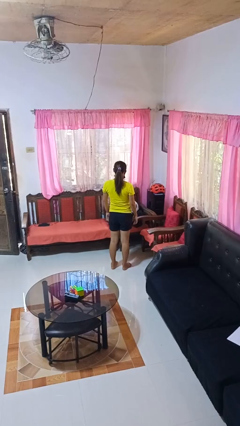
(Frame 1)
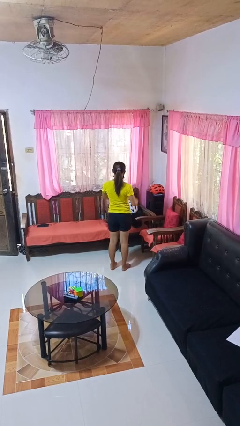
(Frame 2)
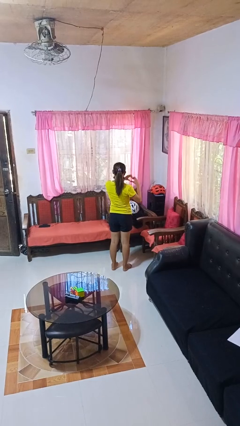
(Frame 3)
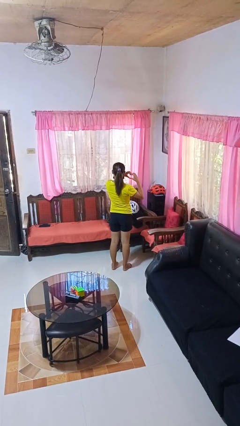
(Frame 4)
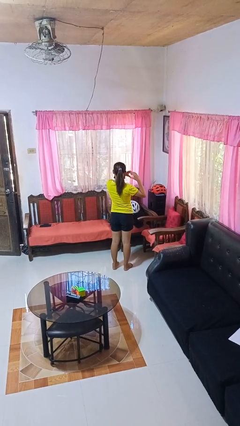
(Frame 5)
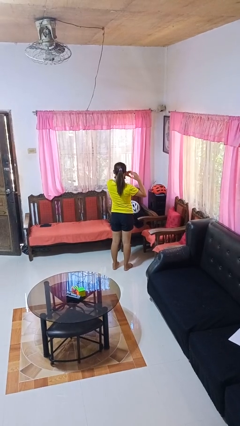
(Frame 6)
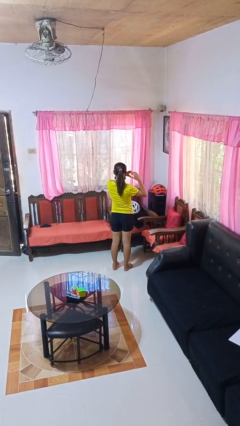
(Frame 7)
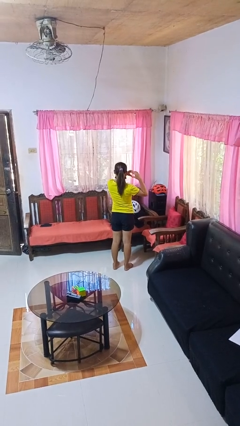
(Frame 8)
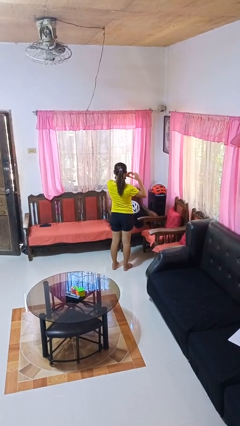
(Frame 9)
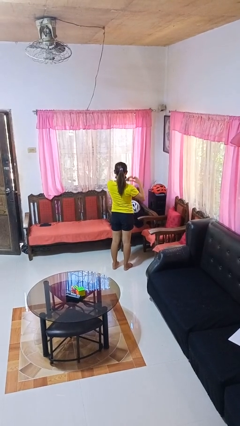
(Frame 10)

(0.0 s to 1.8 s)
person gestures heart

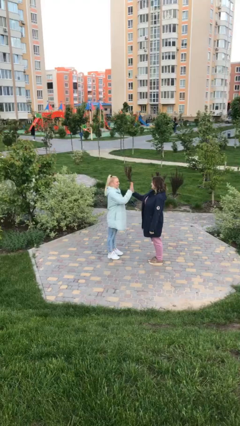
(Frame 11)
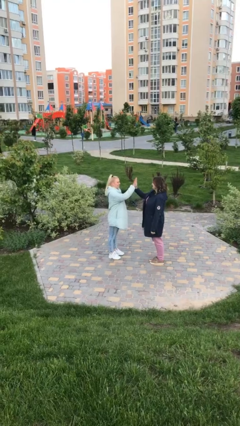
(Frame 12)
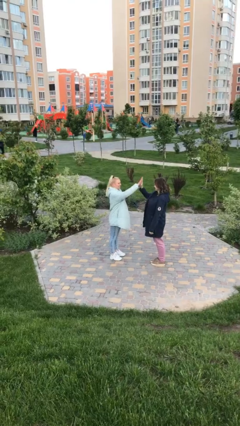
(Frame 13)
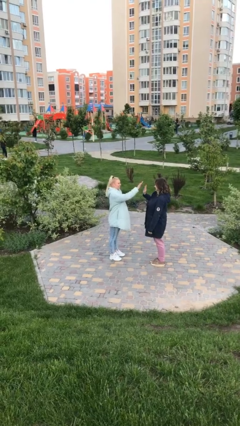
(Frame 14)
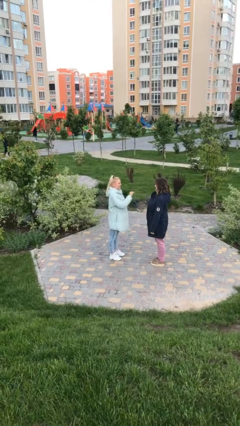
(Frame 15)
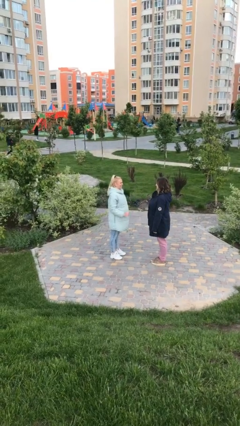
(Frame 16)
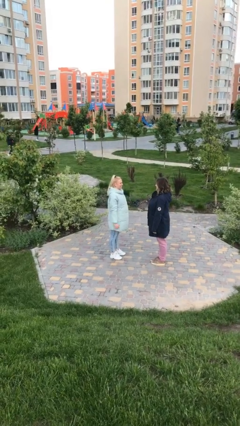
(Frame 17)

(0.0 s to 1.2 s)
person highfives hand

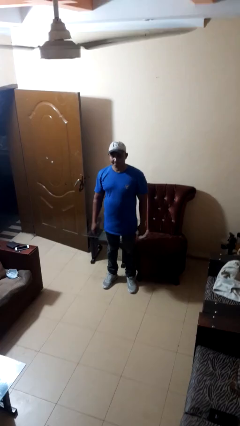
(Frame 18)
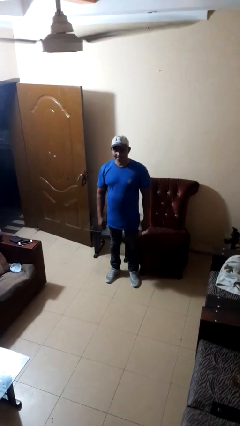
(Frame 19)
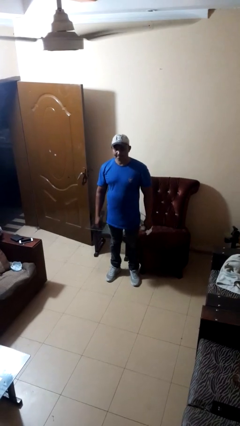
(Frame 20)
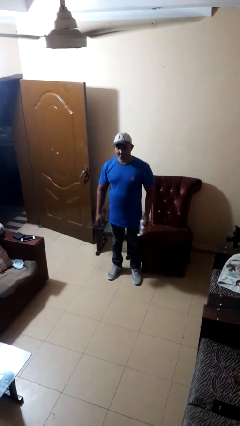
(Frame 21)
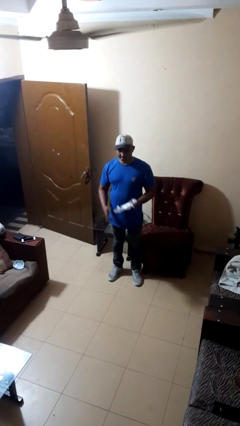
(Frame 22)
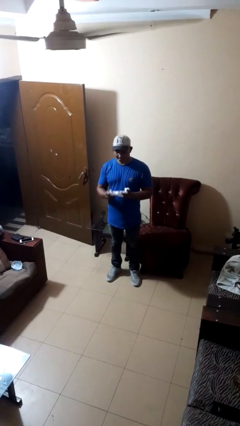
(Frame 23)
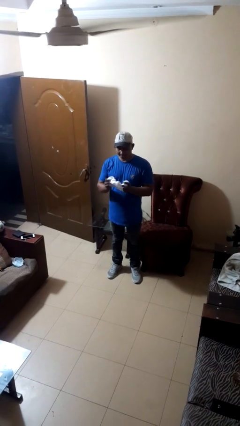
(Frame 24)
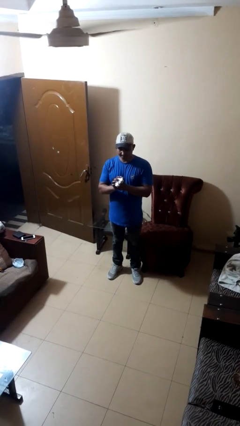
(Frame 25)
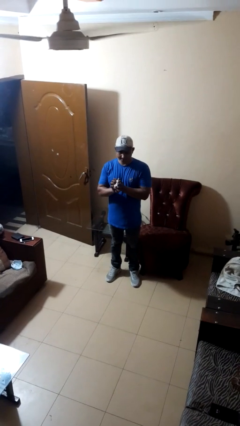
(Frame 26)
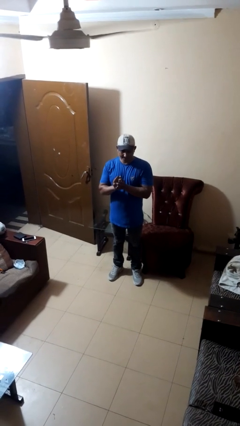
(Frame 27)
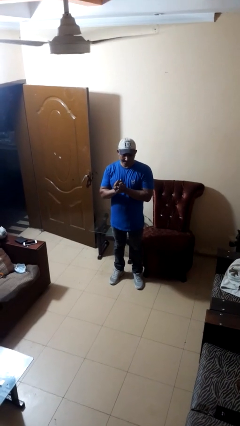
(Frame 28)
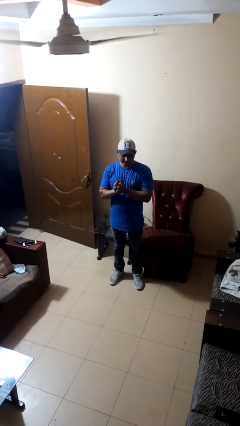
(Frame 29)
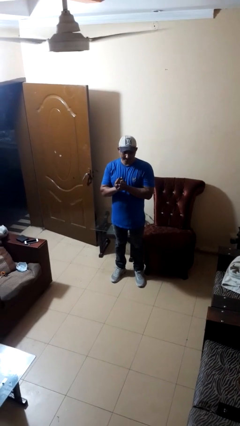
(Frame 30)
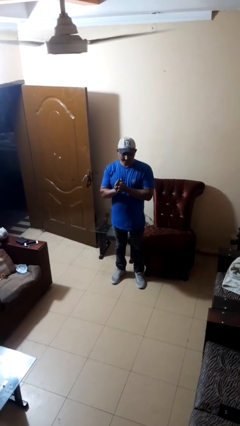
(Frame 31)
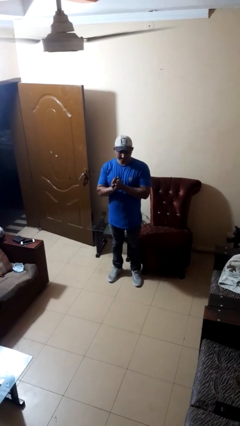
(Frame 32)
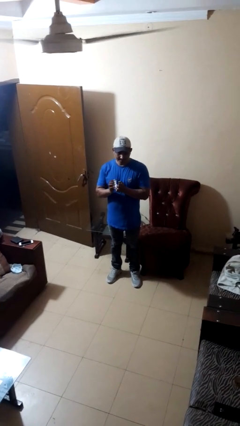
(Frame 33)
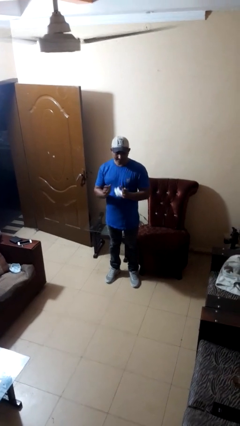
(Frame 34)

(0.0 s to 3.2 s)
person crumples paper

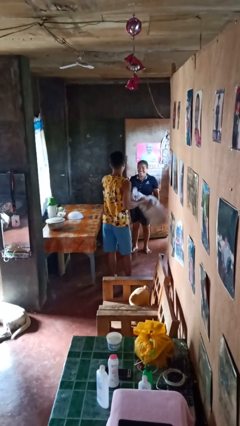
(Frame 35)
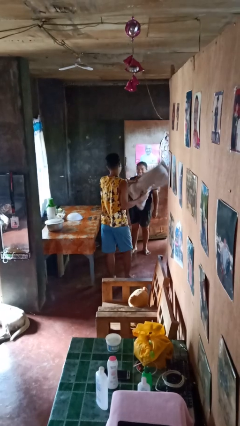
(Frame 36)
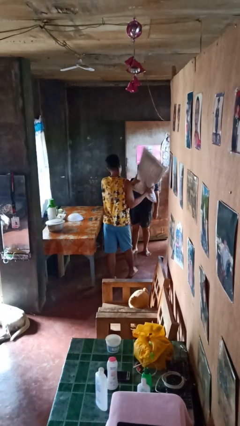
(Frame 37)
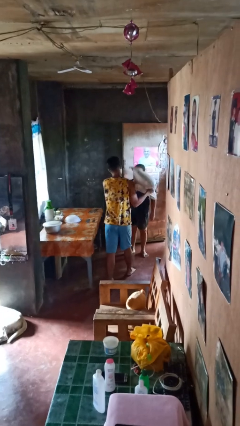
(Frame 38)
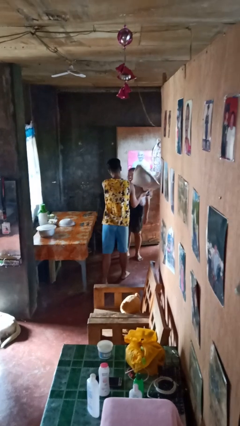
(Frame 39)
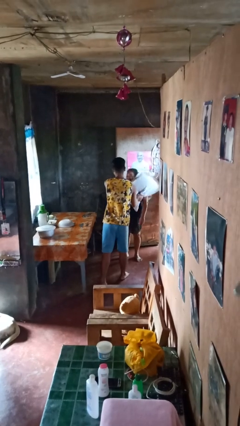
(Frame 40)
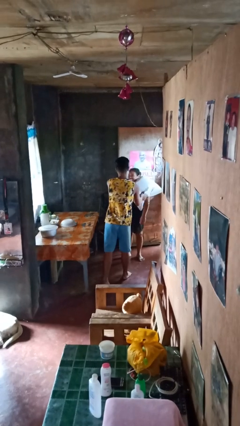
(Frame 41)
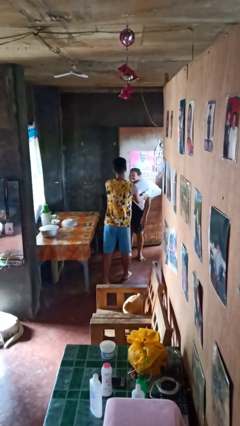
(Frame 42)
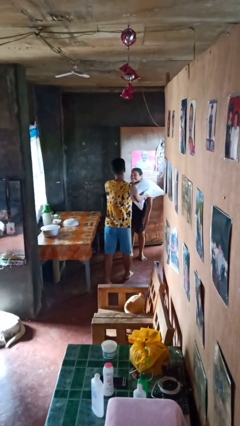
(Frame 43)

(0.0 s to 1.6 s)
person hits person with pillow

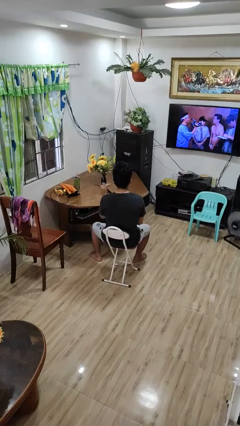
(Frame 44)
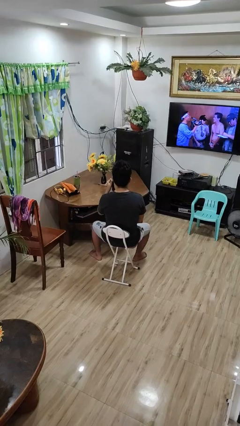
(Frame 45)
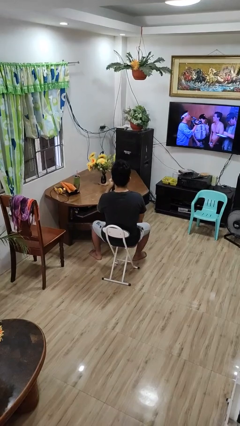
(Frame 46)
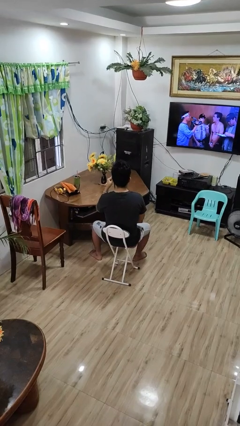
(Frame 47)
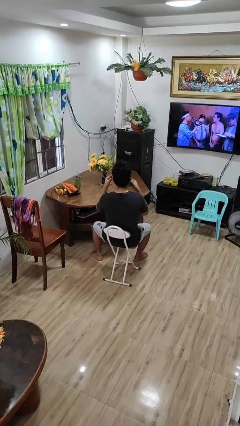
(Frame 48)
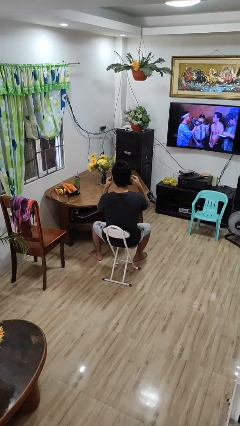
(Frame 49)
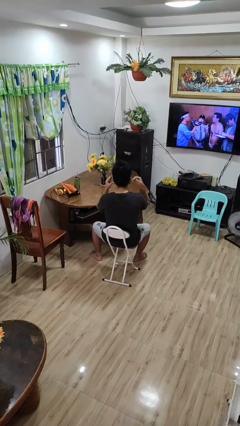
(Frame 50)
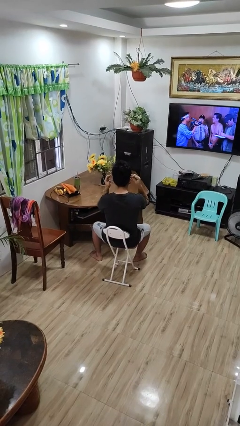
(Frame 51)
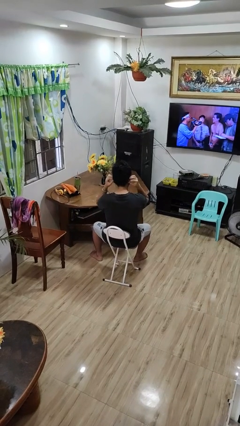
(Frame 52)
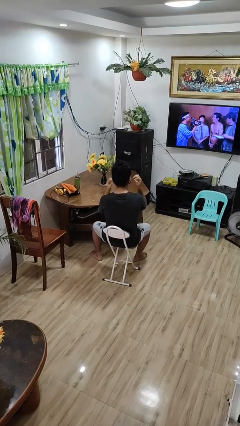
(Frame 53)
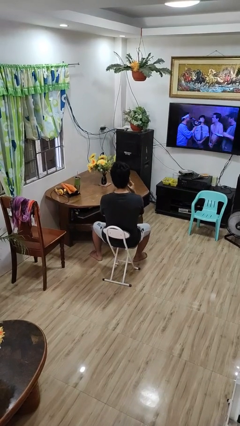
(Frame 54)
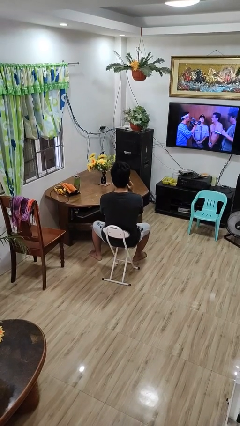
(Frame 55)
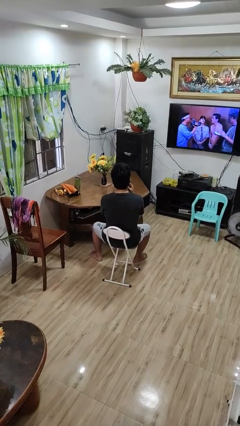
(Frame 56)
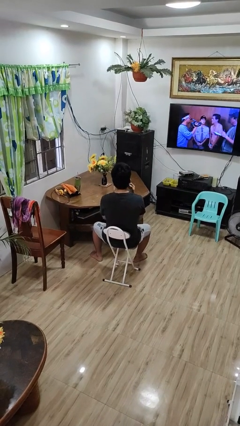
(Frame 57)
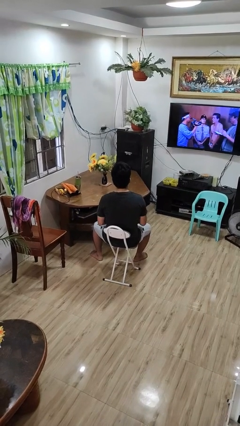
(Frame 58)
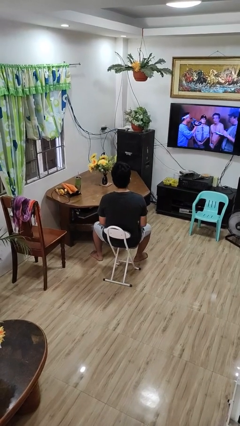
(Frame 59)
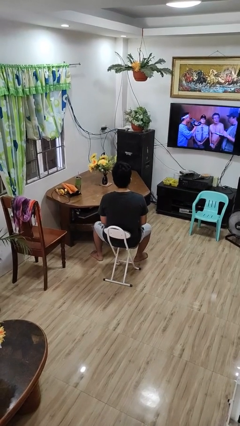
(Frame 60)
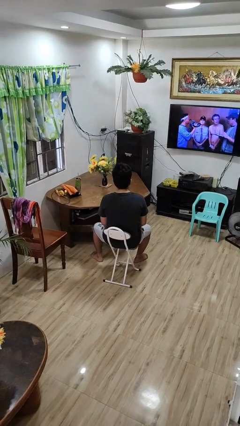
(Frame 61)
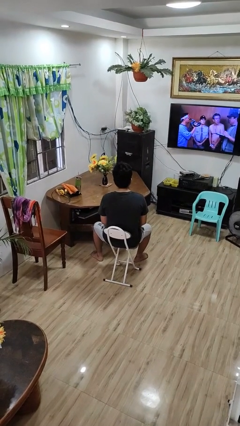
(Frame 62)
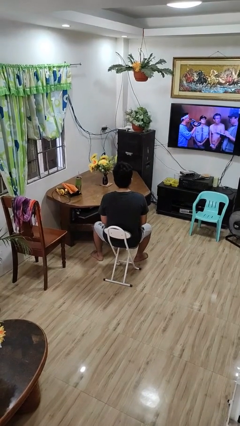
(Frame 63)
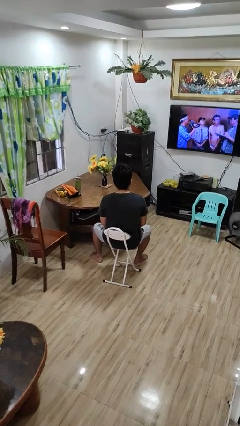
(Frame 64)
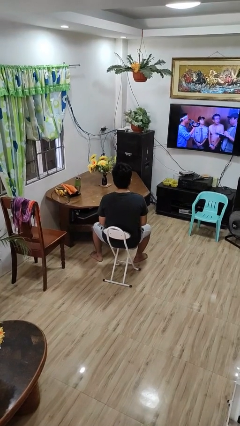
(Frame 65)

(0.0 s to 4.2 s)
person puts on facemask

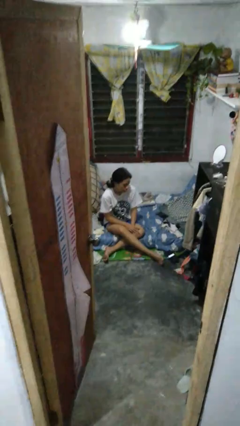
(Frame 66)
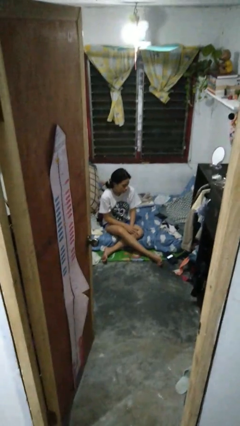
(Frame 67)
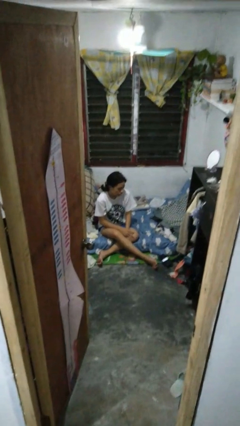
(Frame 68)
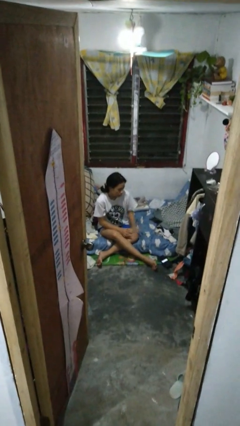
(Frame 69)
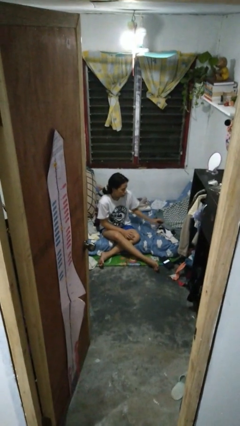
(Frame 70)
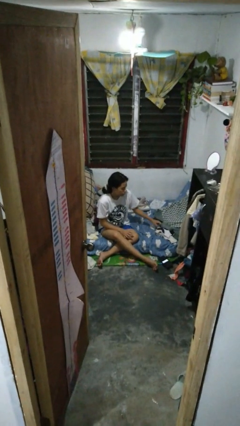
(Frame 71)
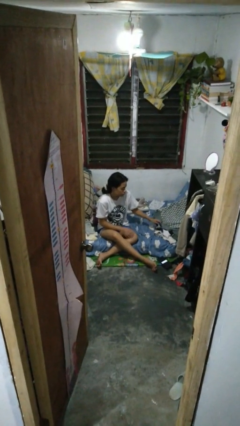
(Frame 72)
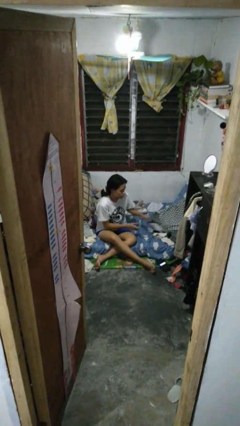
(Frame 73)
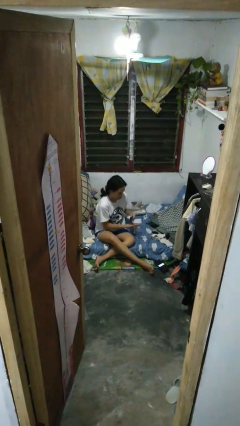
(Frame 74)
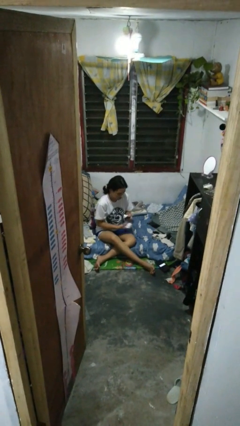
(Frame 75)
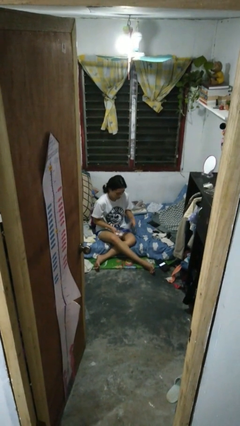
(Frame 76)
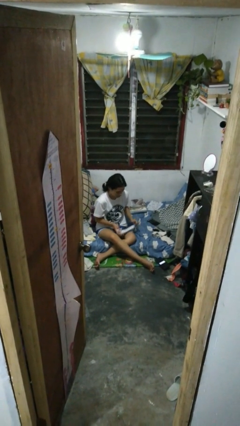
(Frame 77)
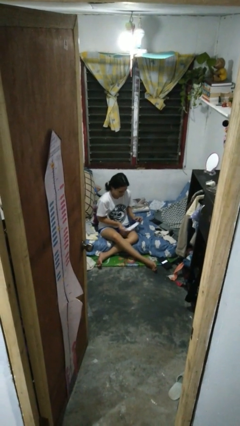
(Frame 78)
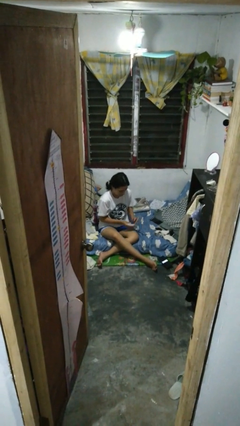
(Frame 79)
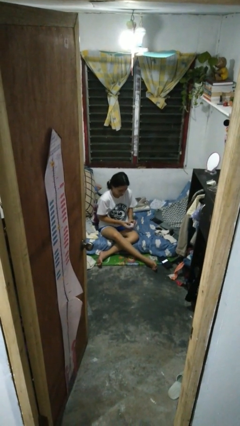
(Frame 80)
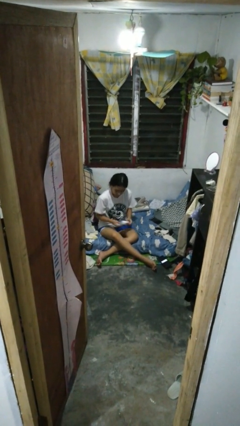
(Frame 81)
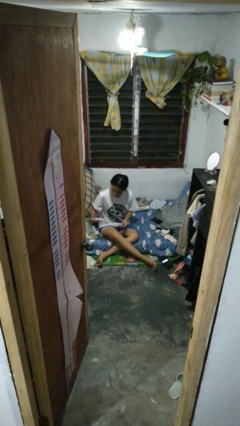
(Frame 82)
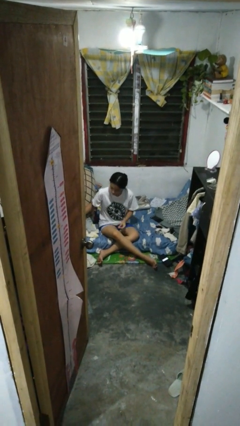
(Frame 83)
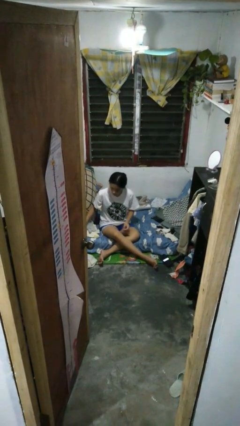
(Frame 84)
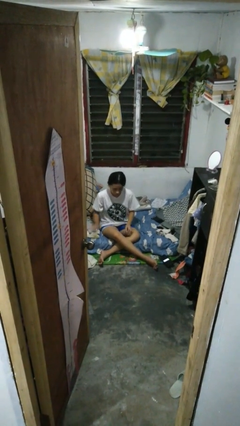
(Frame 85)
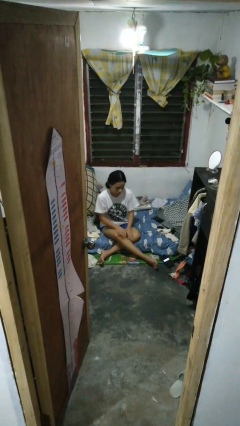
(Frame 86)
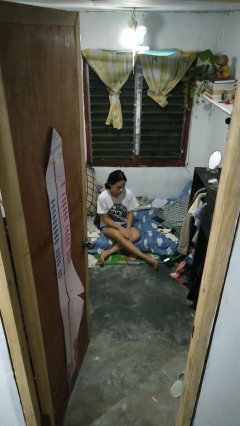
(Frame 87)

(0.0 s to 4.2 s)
person folds socks

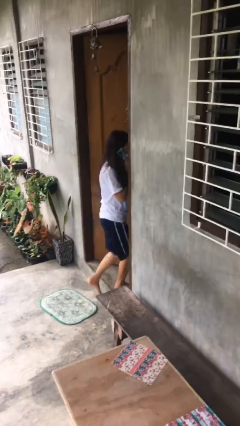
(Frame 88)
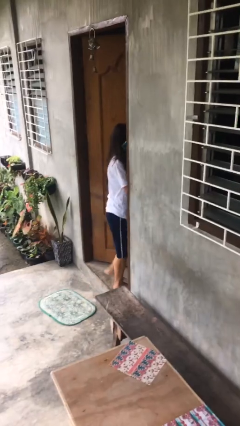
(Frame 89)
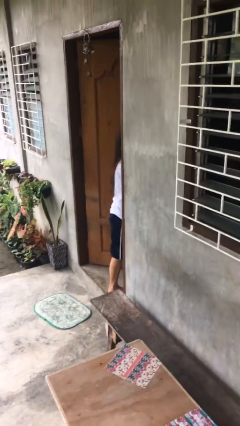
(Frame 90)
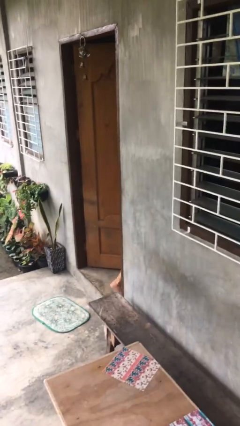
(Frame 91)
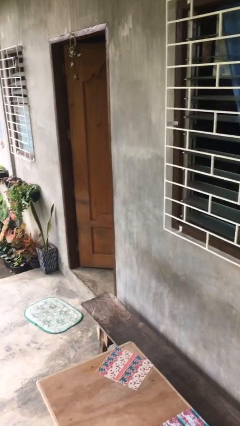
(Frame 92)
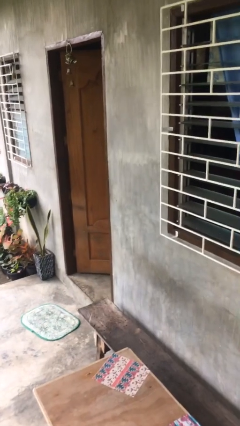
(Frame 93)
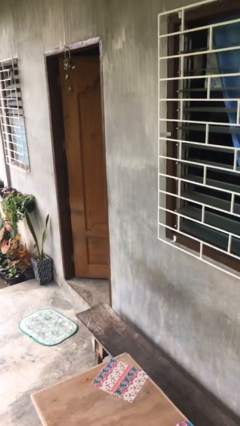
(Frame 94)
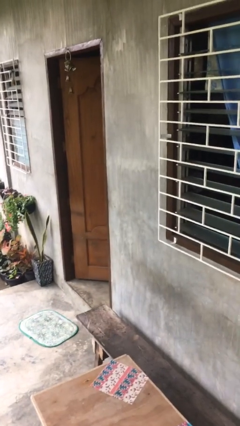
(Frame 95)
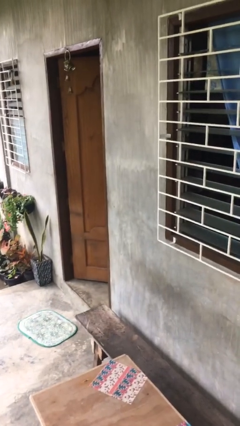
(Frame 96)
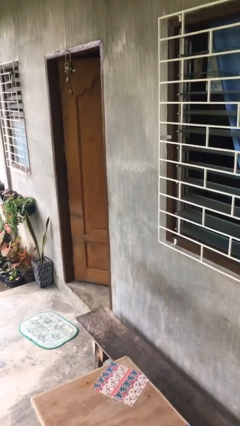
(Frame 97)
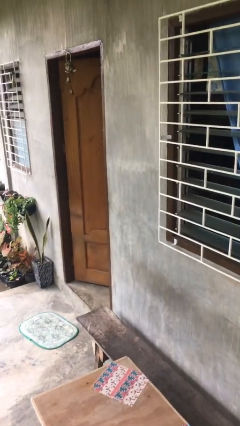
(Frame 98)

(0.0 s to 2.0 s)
person exits scene through structure
